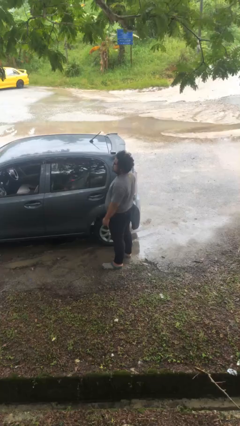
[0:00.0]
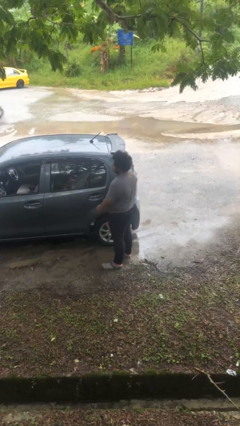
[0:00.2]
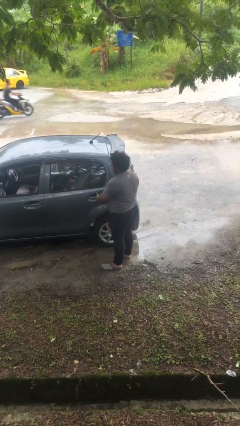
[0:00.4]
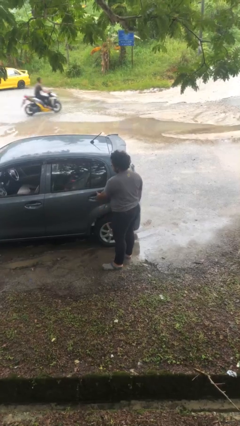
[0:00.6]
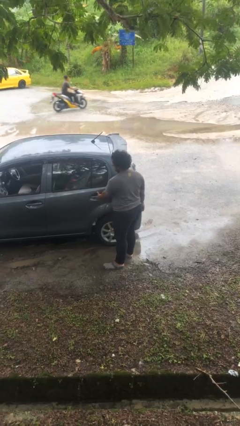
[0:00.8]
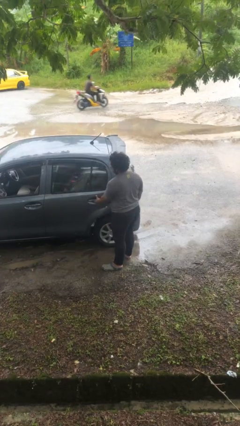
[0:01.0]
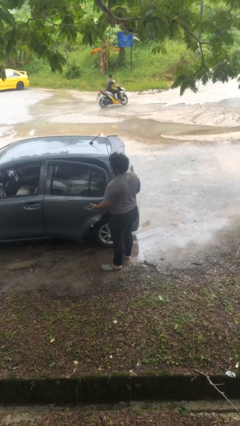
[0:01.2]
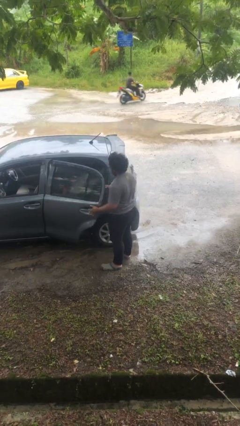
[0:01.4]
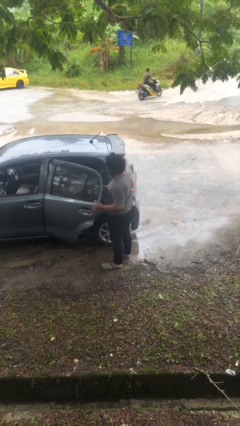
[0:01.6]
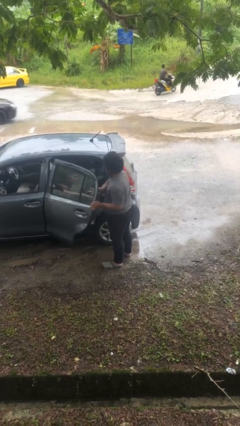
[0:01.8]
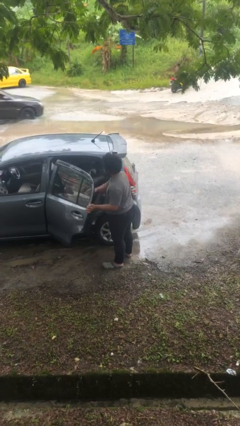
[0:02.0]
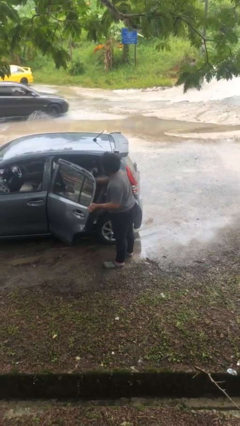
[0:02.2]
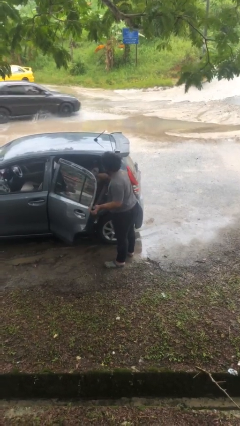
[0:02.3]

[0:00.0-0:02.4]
person opens car door

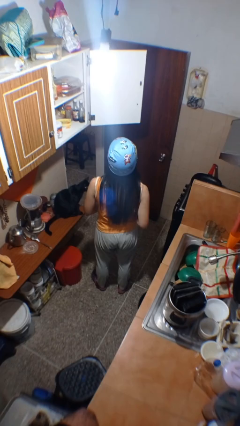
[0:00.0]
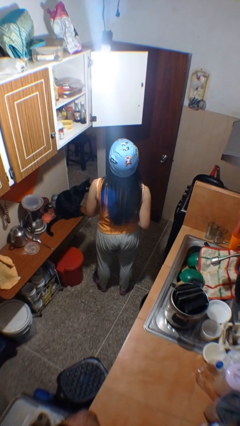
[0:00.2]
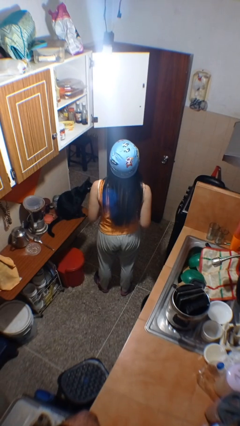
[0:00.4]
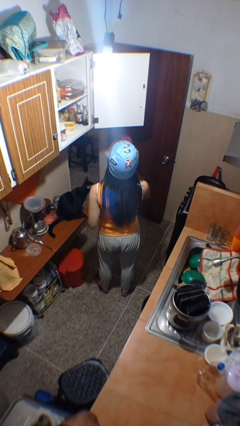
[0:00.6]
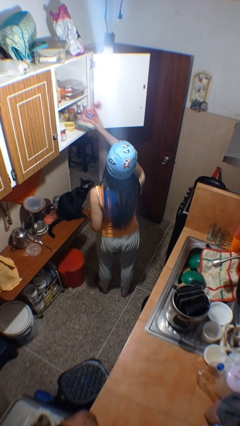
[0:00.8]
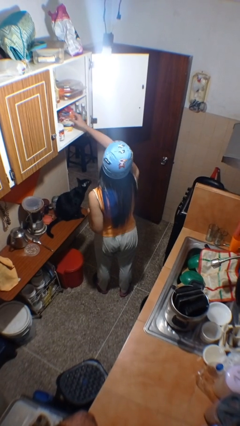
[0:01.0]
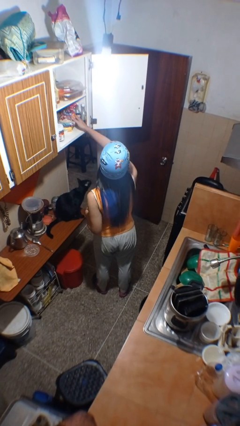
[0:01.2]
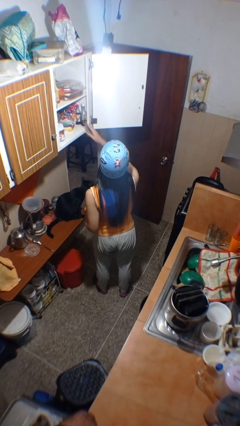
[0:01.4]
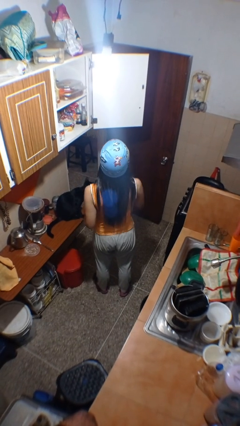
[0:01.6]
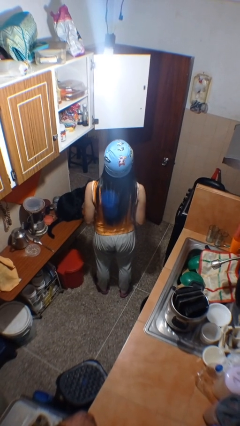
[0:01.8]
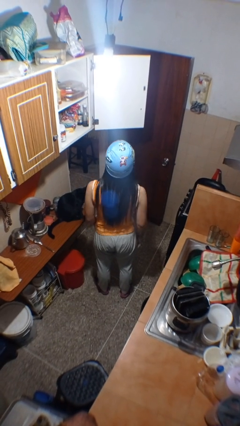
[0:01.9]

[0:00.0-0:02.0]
person puts down object into cabinet

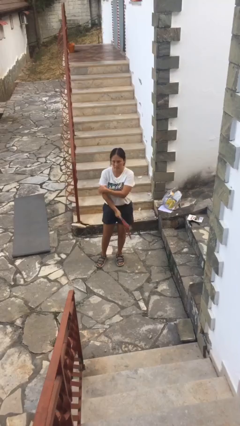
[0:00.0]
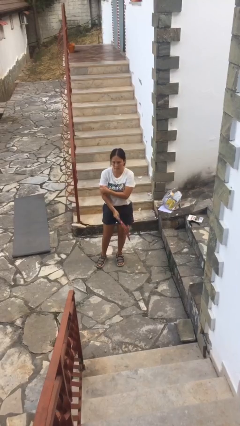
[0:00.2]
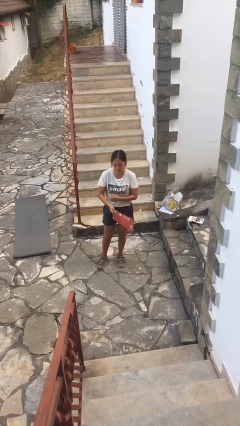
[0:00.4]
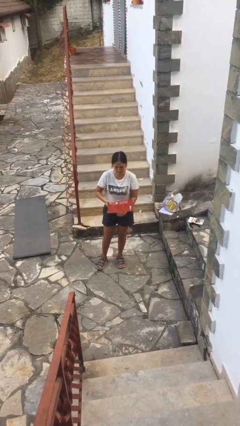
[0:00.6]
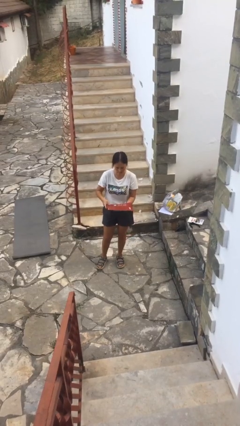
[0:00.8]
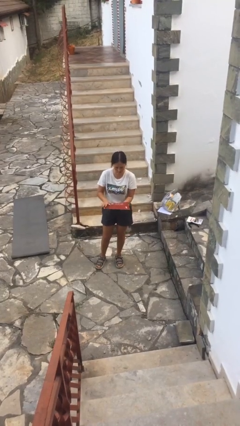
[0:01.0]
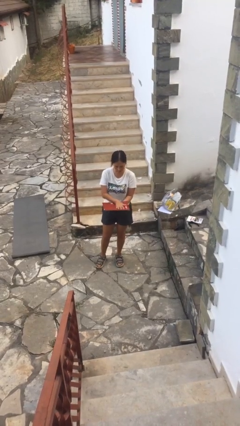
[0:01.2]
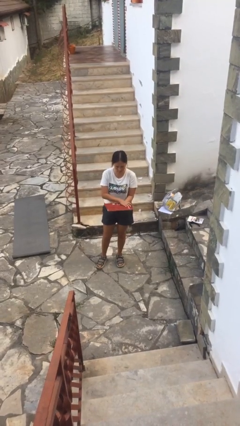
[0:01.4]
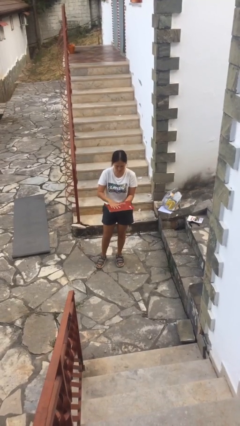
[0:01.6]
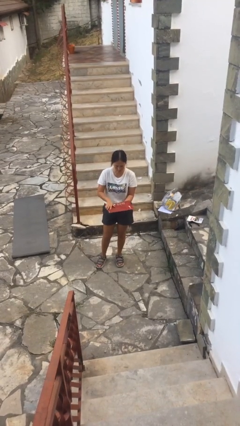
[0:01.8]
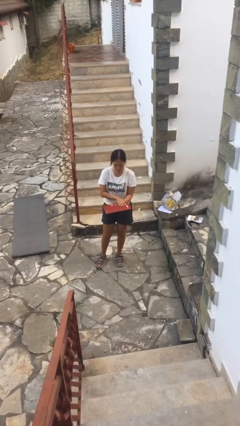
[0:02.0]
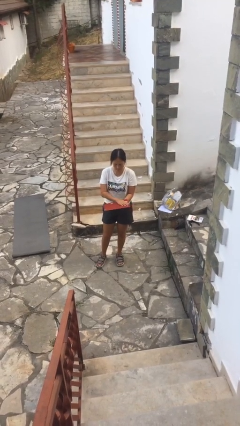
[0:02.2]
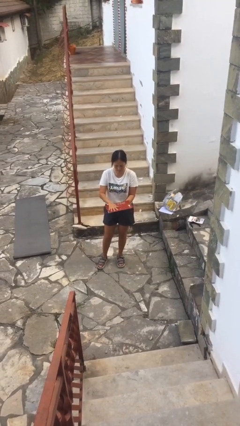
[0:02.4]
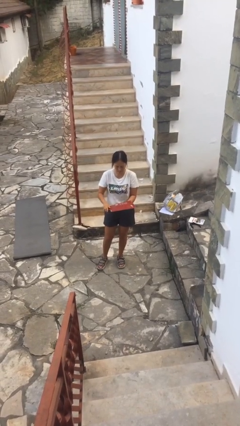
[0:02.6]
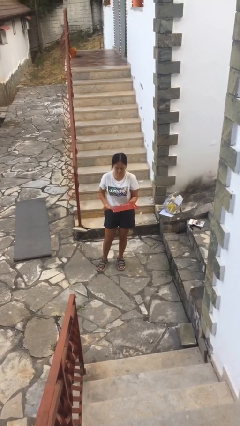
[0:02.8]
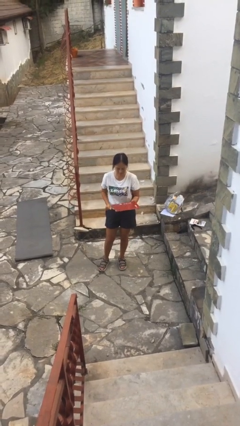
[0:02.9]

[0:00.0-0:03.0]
person waves hand over object

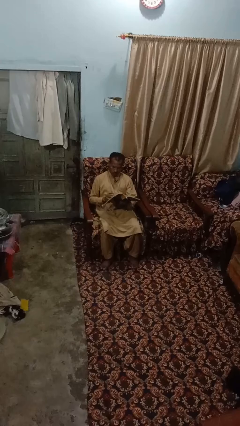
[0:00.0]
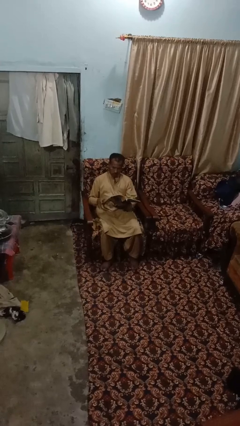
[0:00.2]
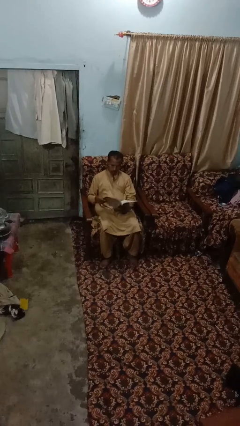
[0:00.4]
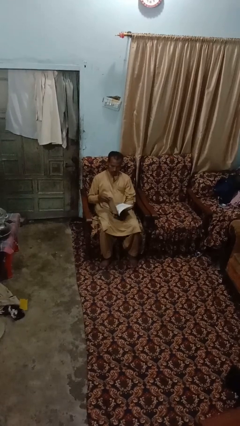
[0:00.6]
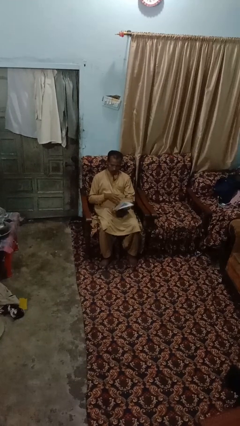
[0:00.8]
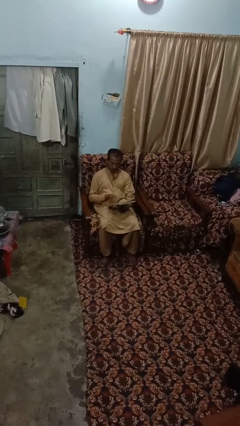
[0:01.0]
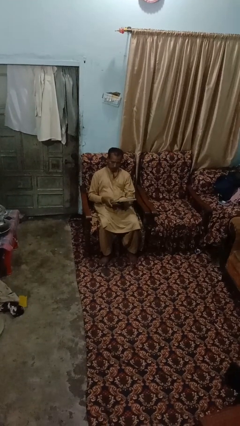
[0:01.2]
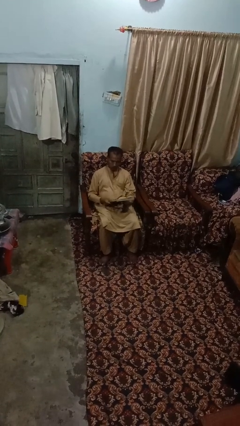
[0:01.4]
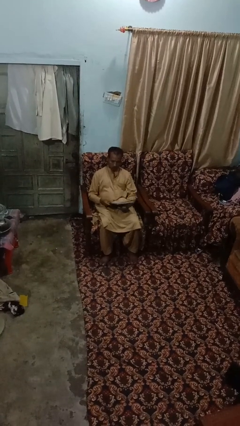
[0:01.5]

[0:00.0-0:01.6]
person reads book

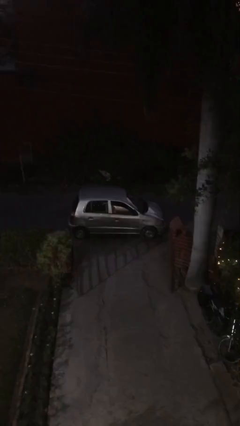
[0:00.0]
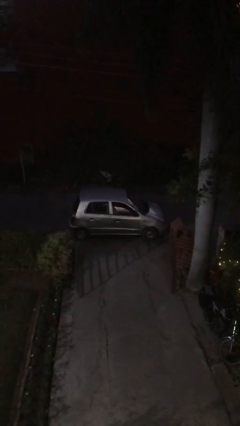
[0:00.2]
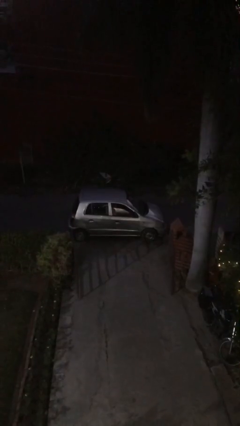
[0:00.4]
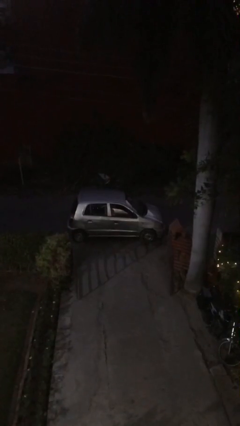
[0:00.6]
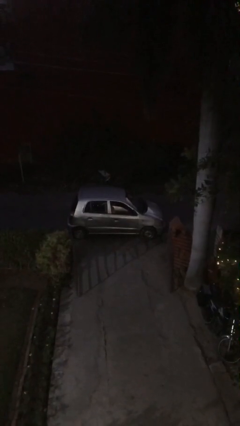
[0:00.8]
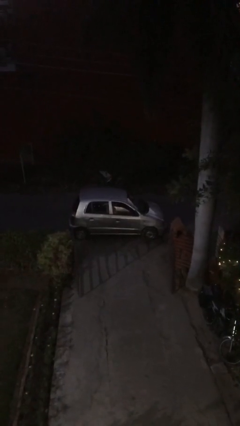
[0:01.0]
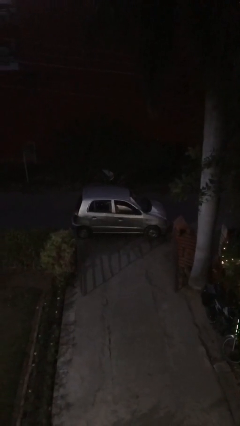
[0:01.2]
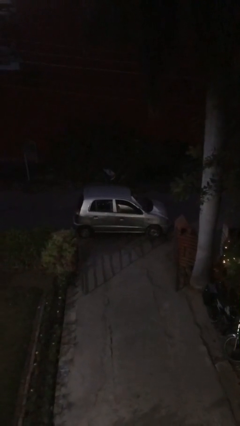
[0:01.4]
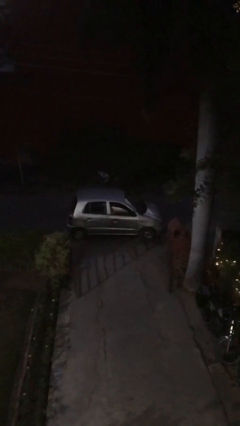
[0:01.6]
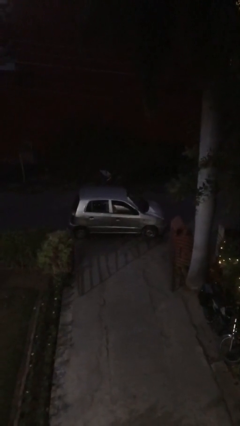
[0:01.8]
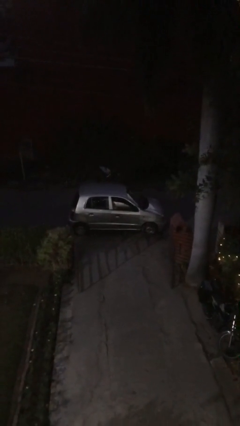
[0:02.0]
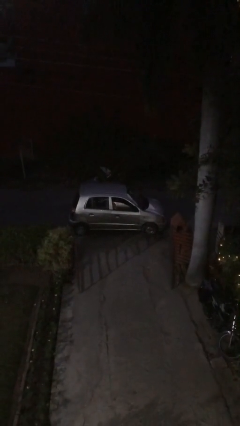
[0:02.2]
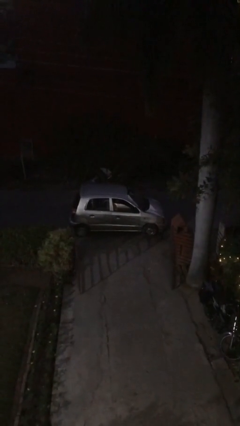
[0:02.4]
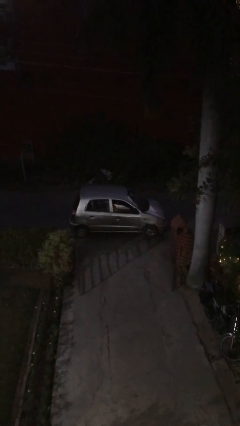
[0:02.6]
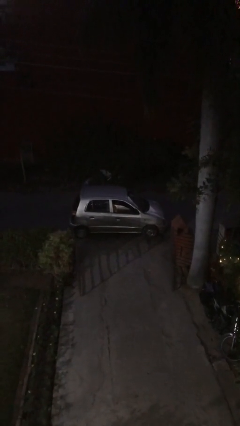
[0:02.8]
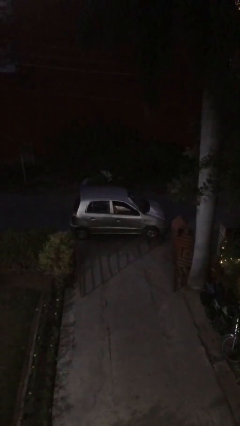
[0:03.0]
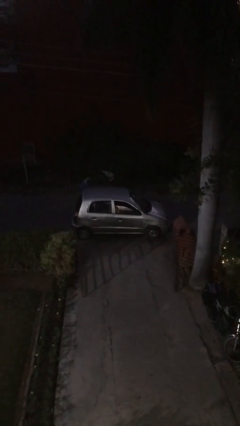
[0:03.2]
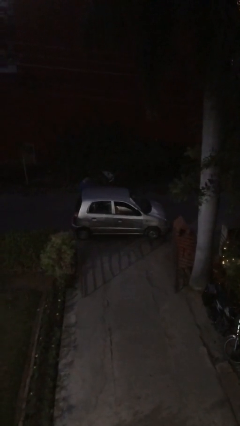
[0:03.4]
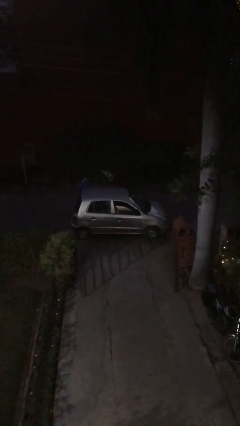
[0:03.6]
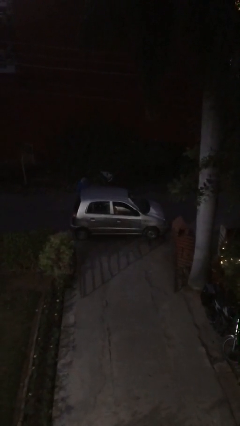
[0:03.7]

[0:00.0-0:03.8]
car drops off person

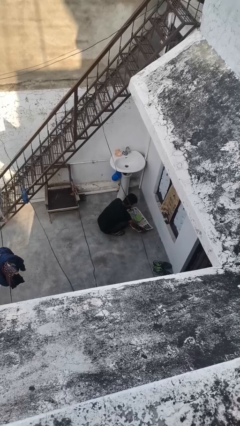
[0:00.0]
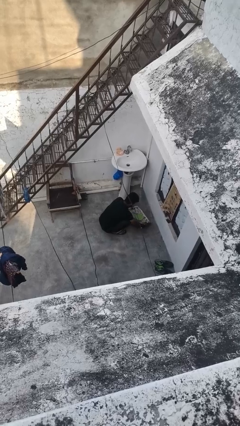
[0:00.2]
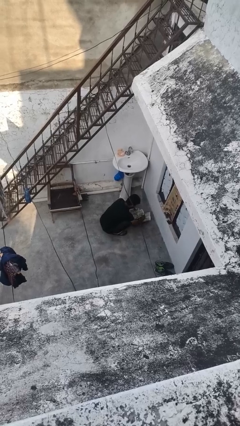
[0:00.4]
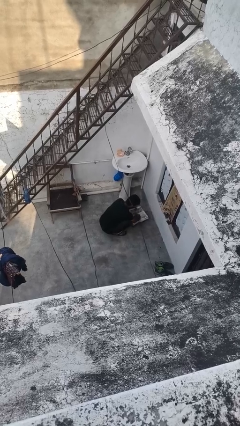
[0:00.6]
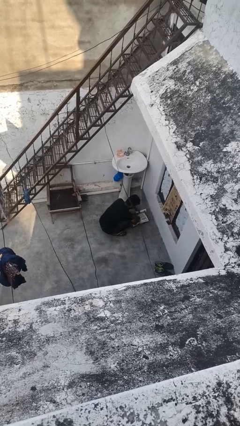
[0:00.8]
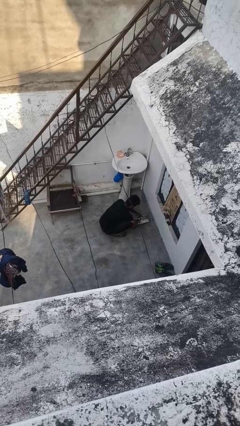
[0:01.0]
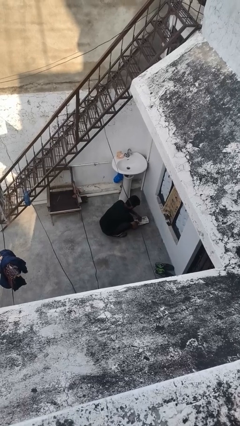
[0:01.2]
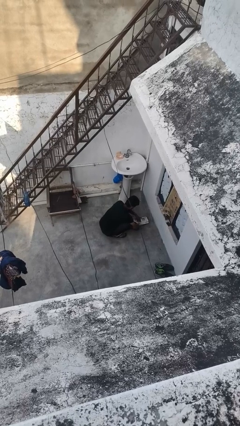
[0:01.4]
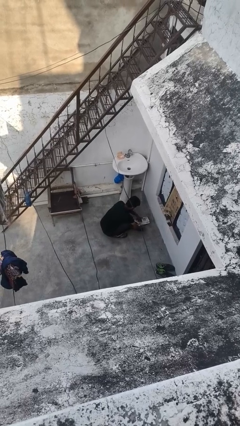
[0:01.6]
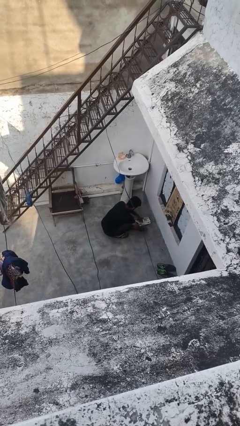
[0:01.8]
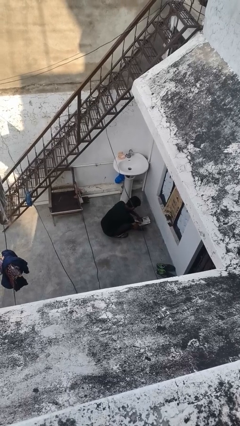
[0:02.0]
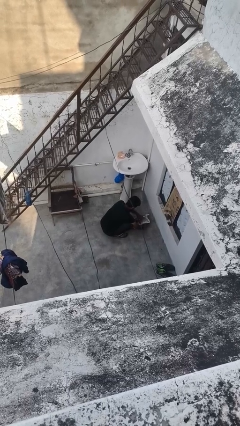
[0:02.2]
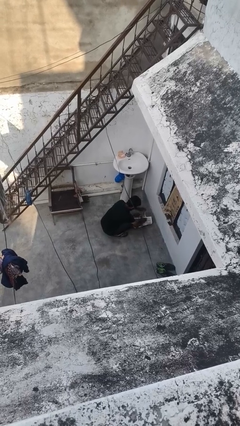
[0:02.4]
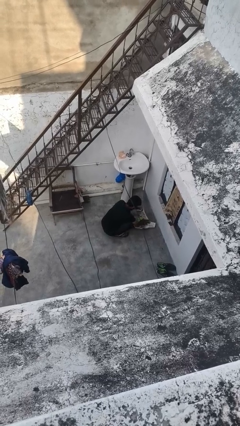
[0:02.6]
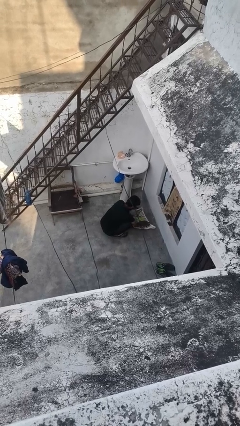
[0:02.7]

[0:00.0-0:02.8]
person wraps box

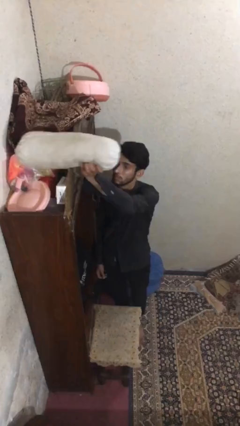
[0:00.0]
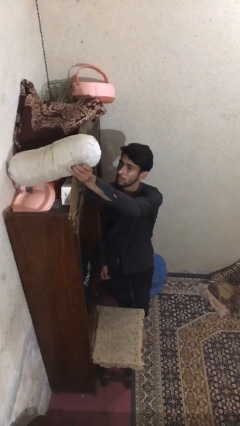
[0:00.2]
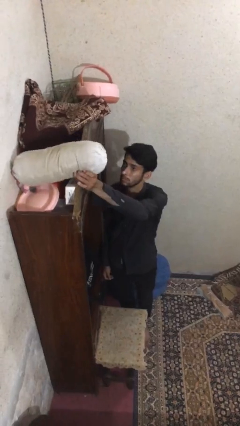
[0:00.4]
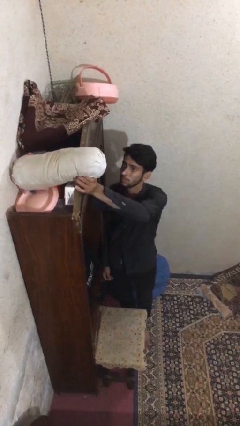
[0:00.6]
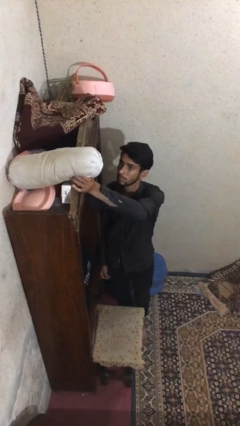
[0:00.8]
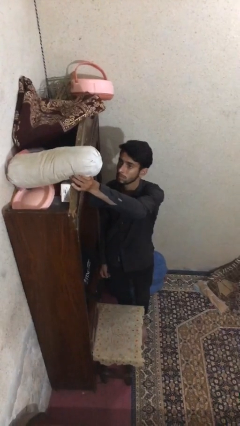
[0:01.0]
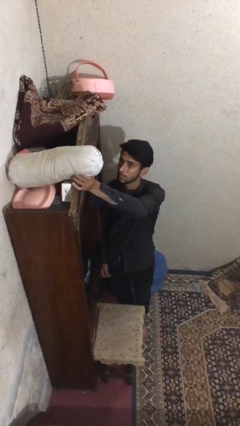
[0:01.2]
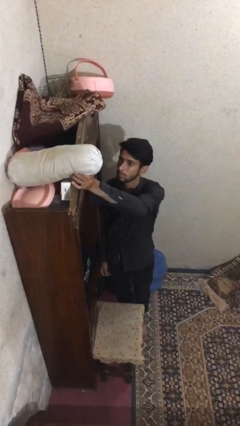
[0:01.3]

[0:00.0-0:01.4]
person puts down object on shelf

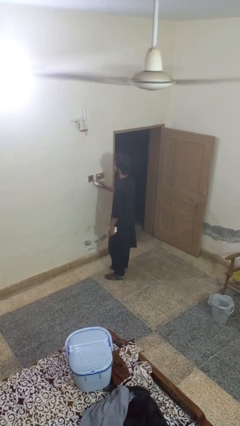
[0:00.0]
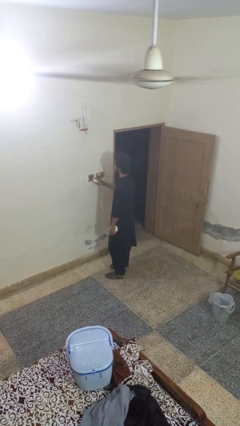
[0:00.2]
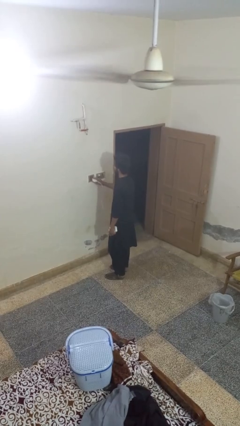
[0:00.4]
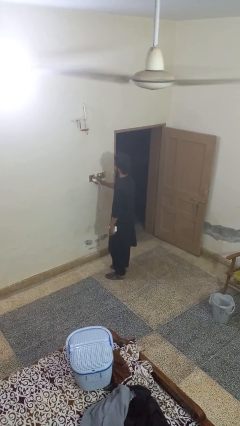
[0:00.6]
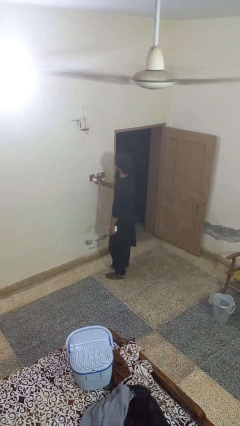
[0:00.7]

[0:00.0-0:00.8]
person plugs into electrical socket
